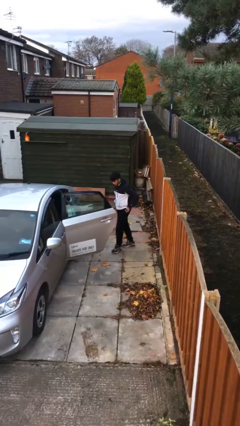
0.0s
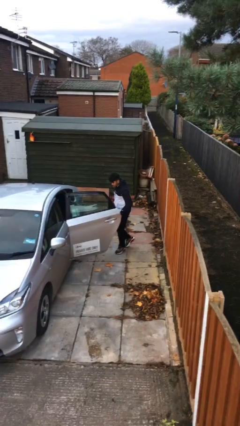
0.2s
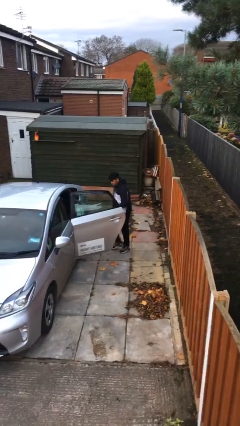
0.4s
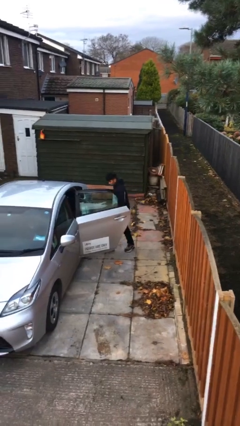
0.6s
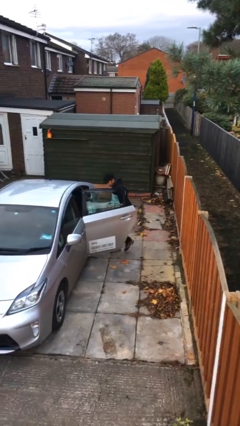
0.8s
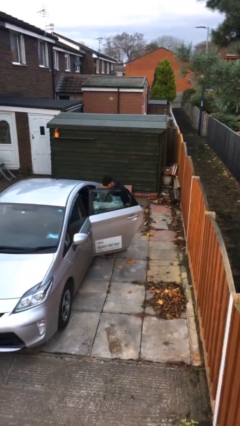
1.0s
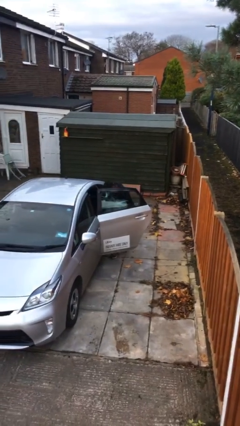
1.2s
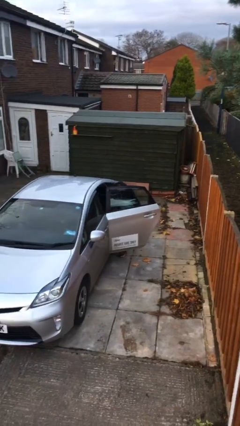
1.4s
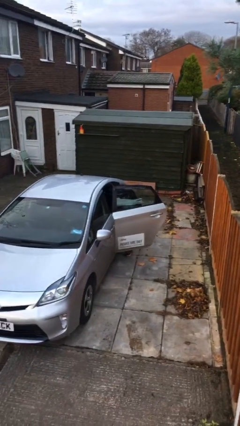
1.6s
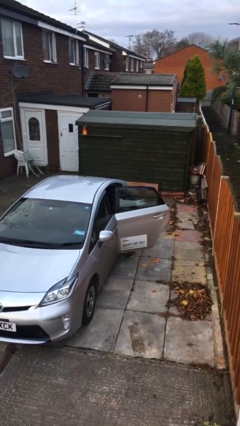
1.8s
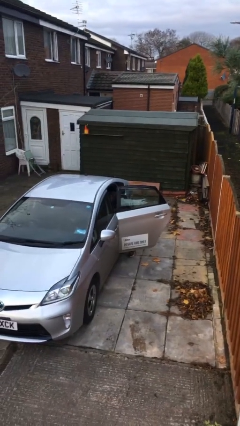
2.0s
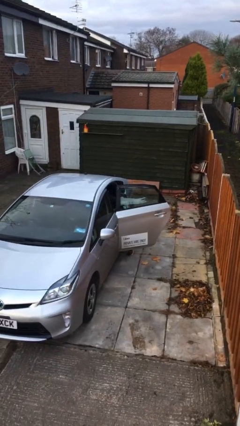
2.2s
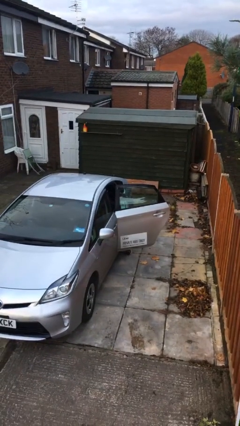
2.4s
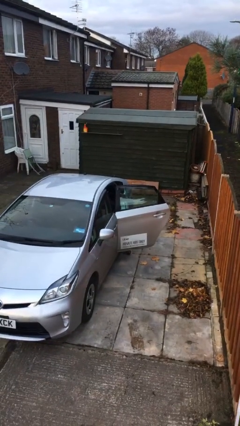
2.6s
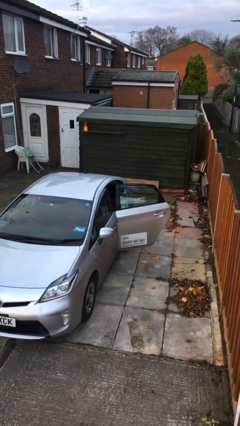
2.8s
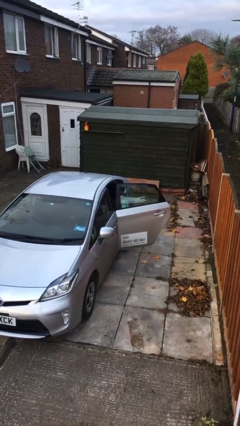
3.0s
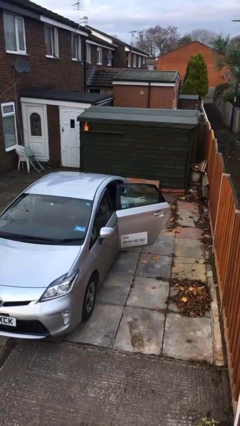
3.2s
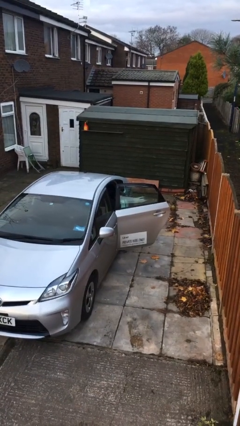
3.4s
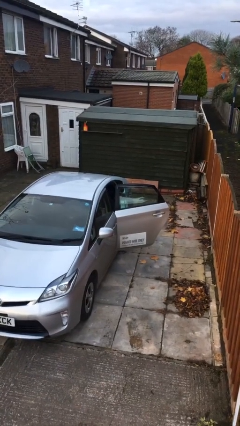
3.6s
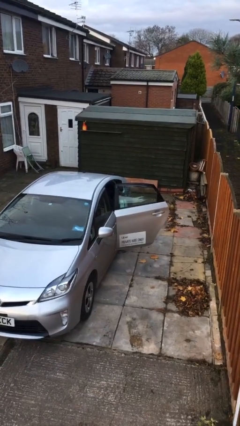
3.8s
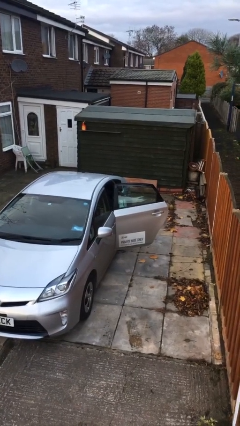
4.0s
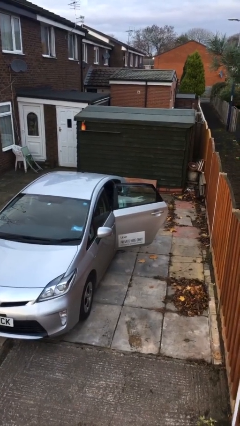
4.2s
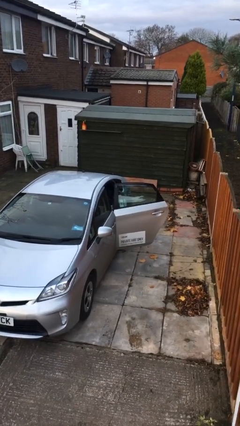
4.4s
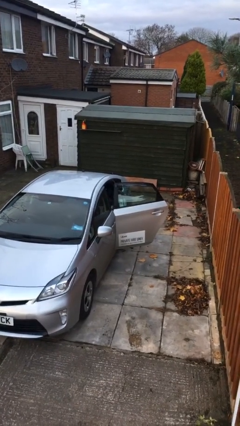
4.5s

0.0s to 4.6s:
person enters car

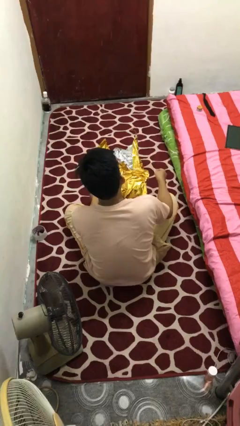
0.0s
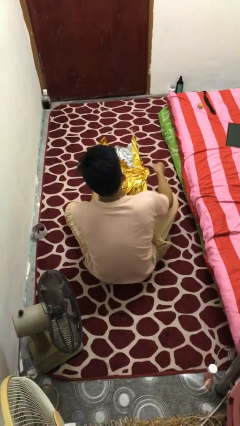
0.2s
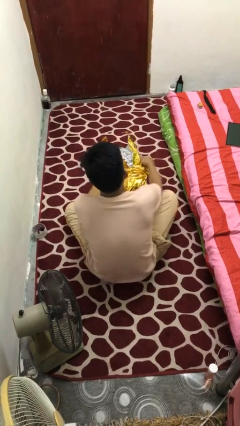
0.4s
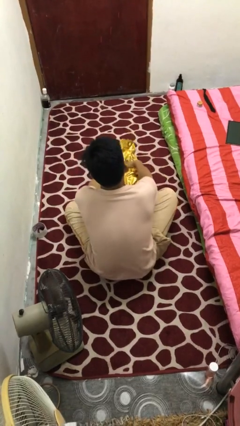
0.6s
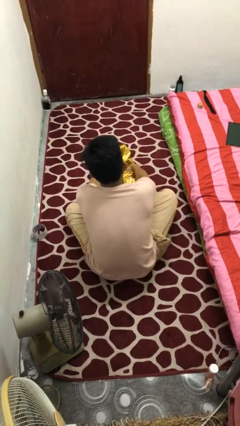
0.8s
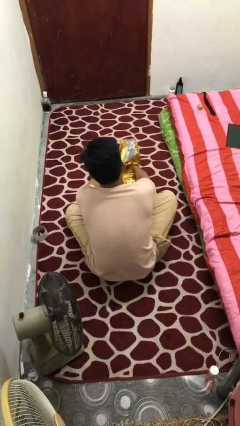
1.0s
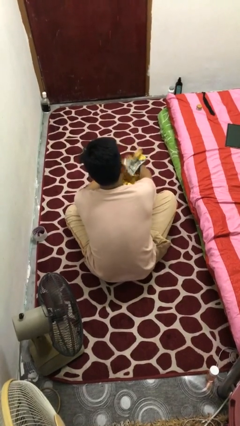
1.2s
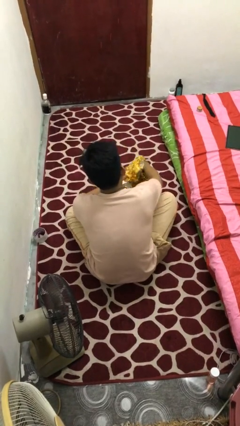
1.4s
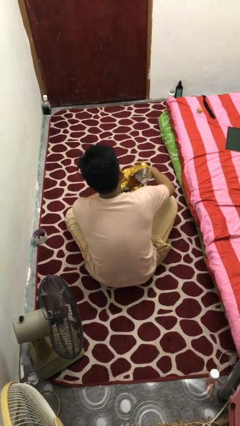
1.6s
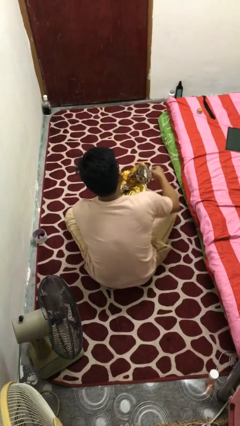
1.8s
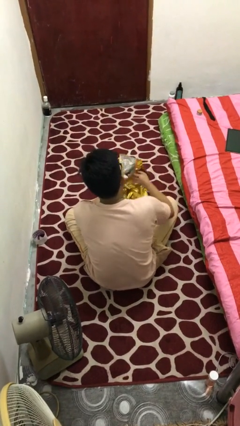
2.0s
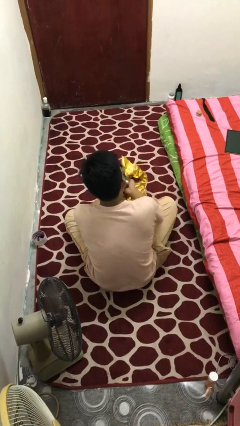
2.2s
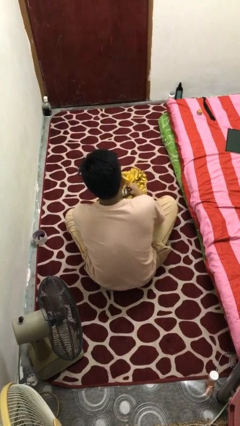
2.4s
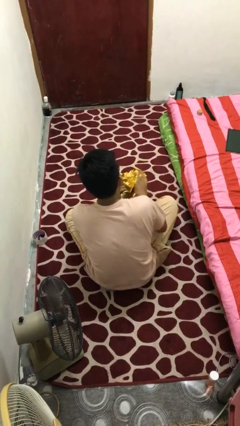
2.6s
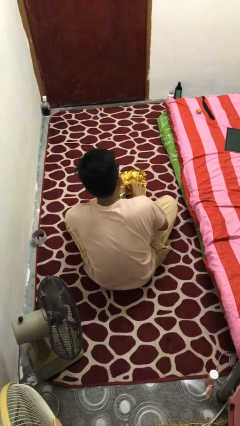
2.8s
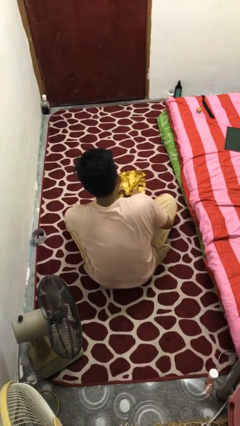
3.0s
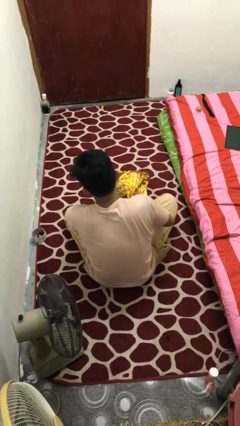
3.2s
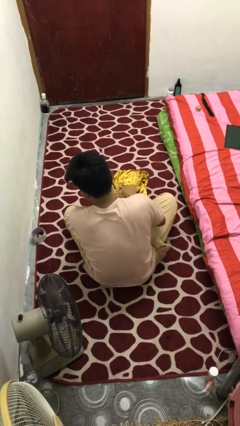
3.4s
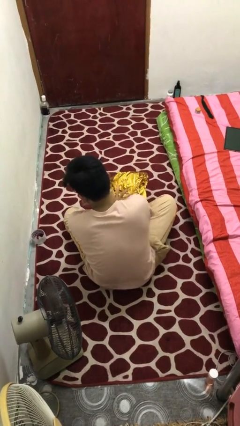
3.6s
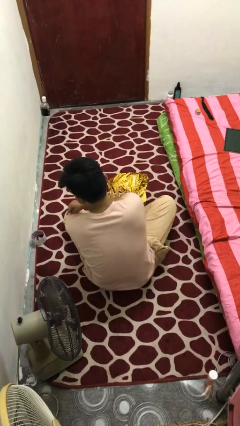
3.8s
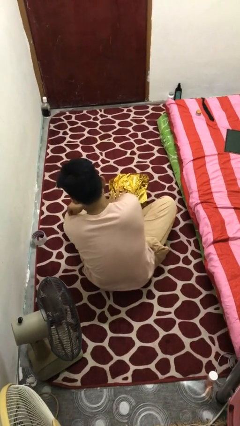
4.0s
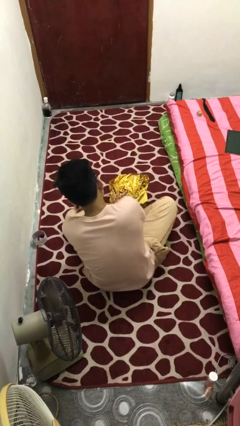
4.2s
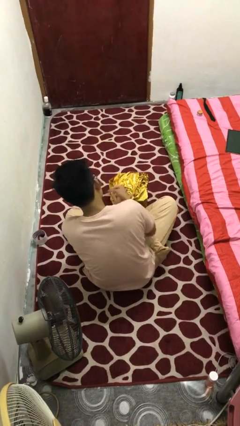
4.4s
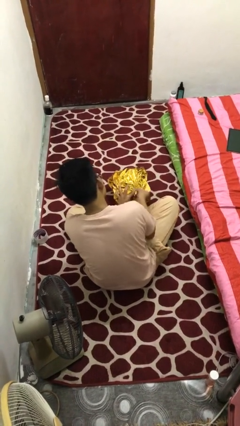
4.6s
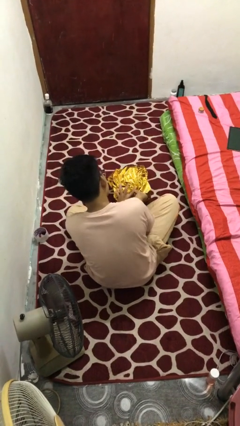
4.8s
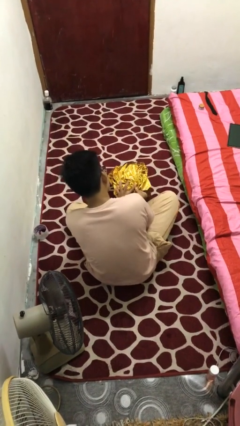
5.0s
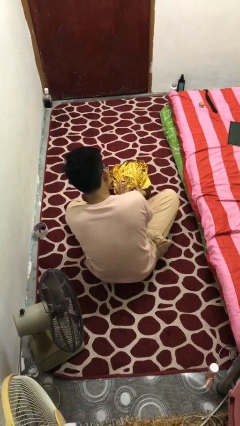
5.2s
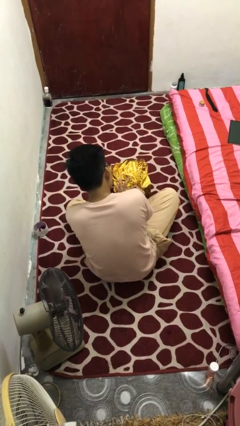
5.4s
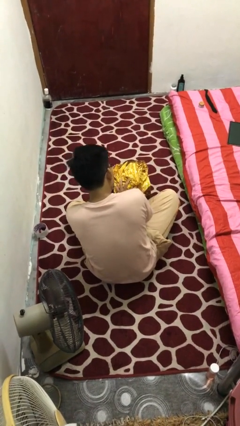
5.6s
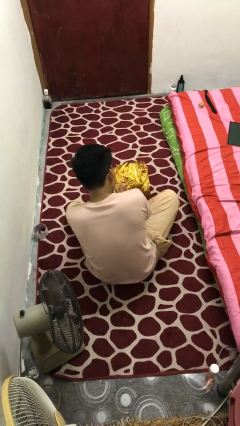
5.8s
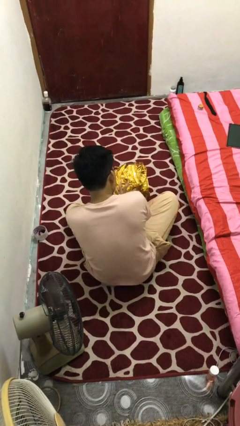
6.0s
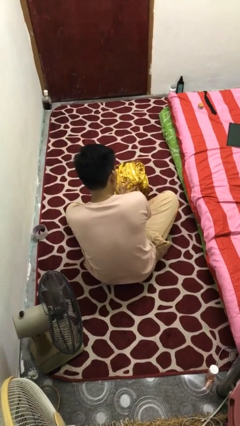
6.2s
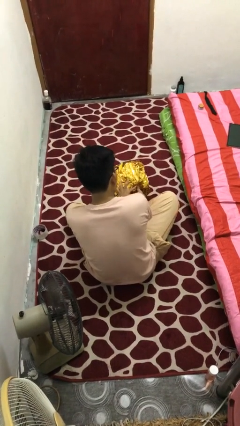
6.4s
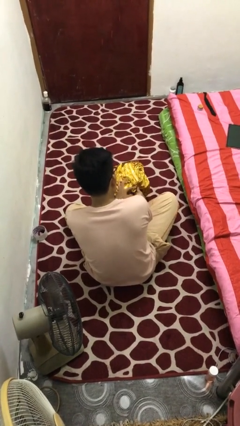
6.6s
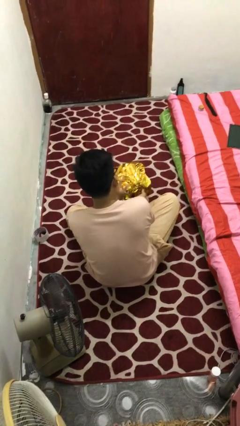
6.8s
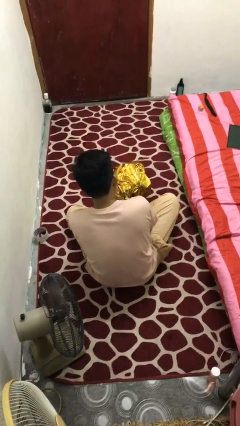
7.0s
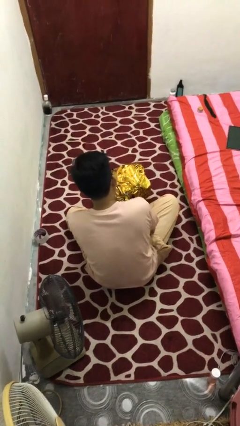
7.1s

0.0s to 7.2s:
person wraps box

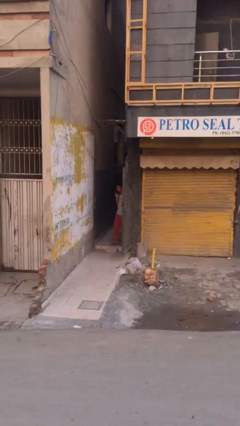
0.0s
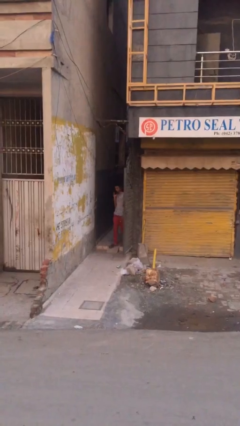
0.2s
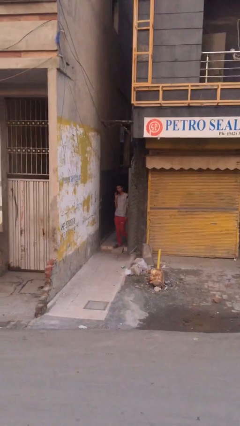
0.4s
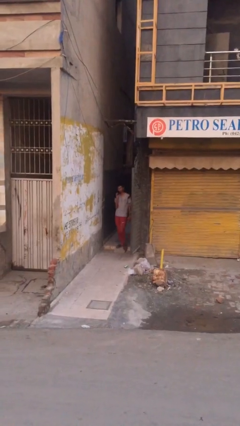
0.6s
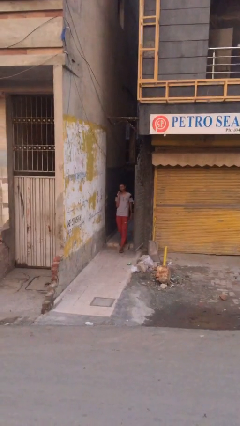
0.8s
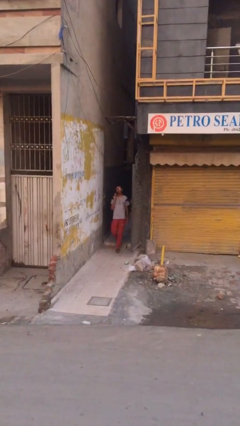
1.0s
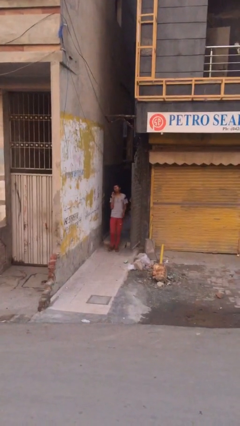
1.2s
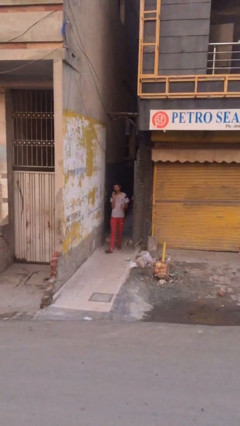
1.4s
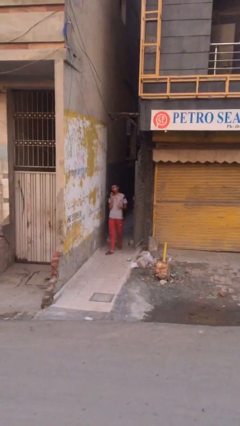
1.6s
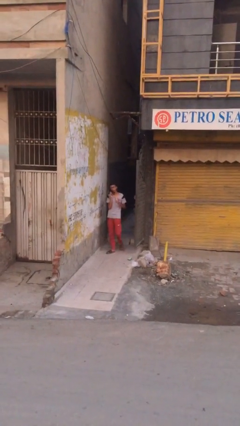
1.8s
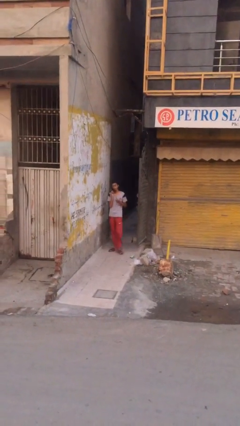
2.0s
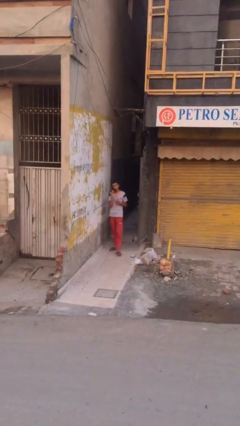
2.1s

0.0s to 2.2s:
person enters scene through structure

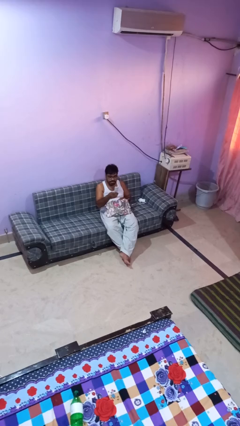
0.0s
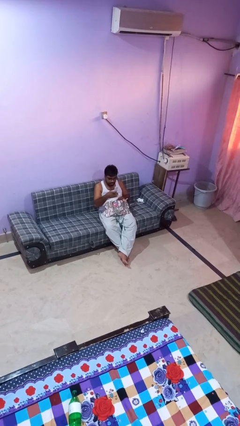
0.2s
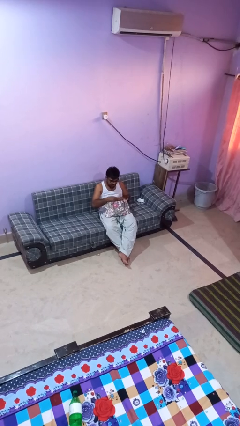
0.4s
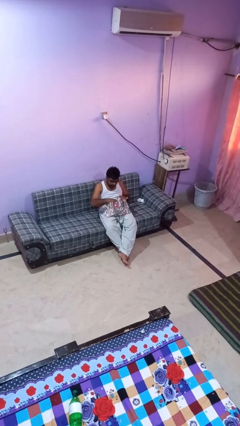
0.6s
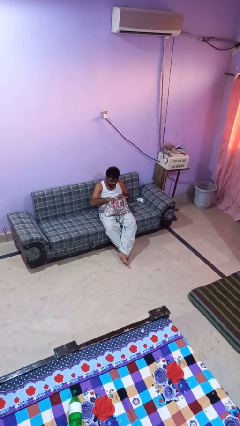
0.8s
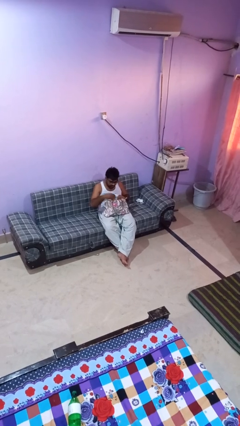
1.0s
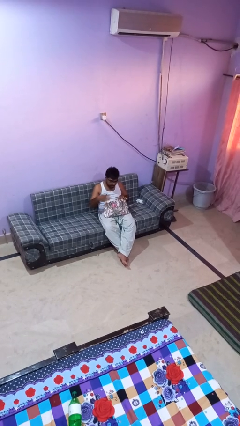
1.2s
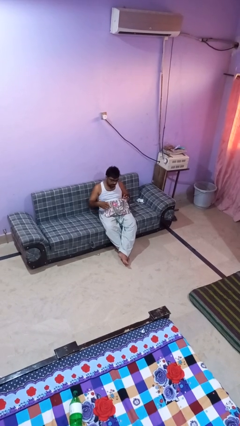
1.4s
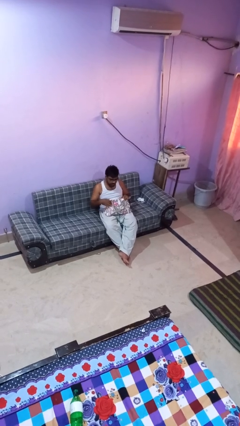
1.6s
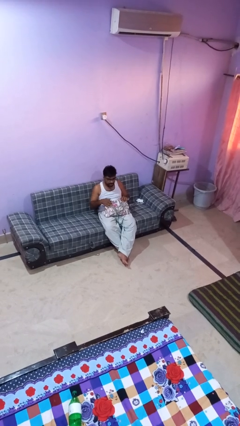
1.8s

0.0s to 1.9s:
person puts object into purse

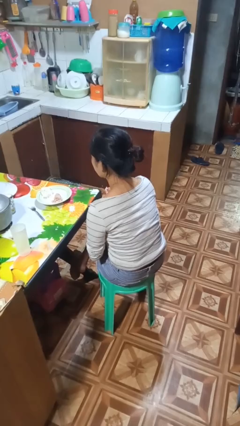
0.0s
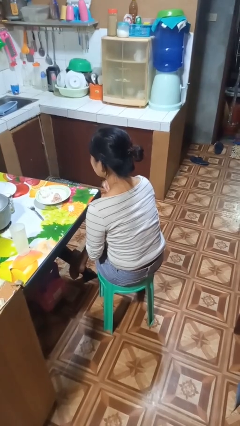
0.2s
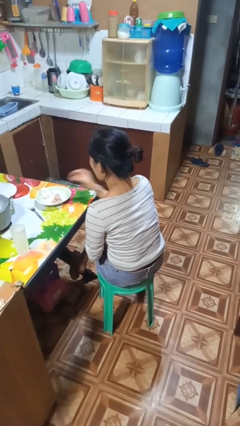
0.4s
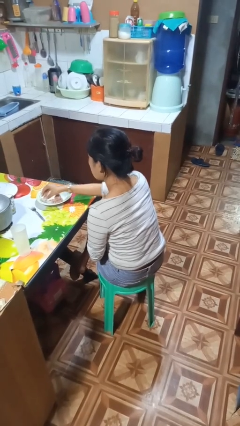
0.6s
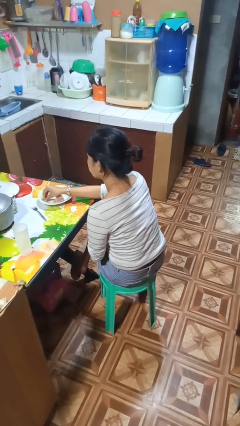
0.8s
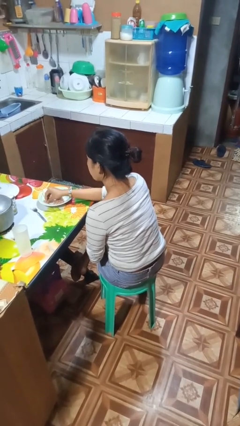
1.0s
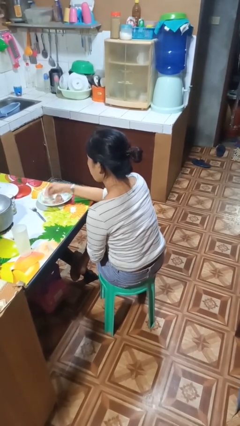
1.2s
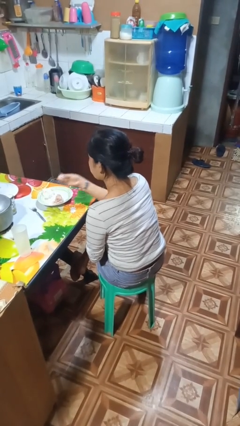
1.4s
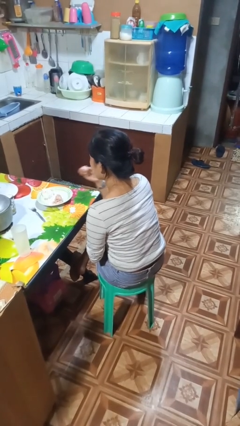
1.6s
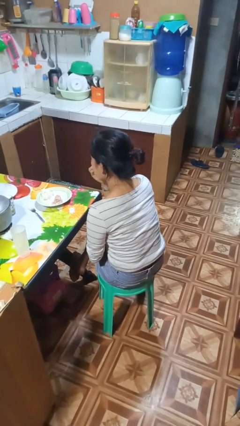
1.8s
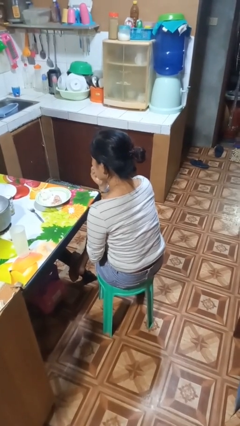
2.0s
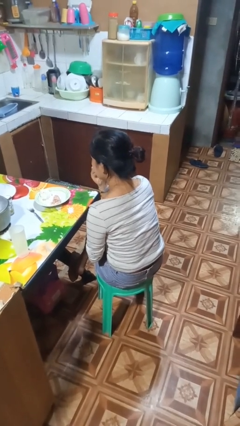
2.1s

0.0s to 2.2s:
person eats with hands
